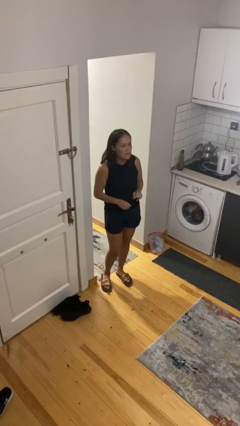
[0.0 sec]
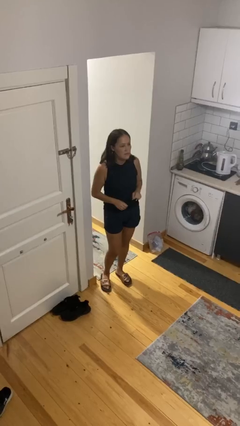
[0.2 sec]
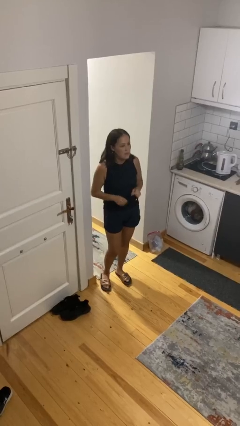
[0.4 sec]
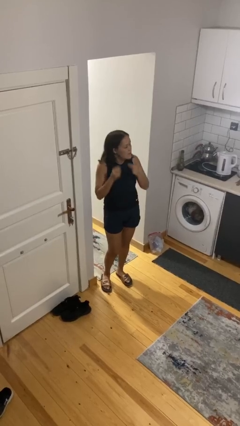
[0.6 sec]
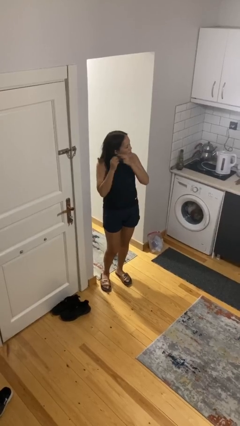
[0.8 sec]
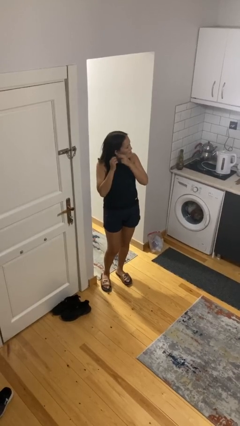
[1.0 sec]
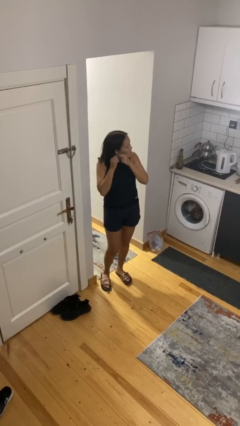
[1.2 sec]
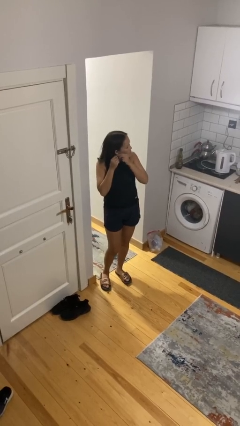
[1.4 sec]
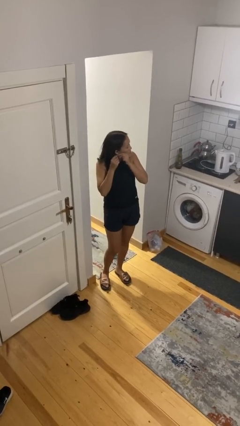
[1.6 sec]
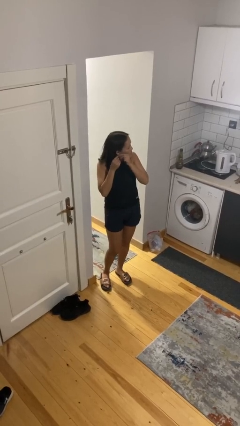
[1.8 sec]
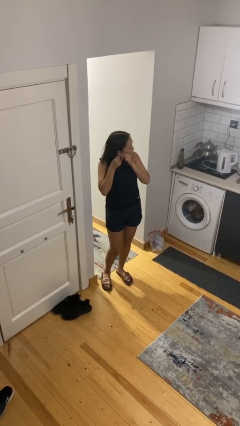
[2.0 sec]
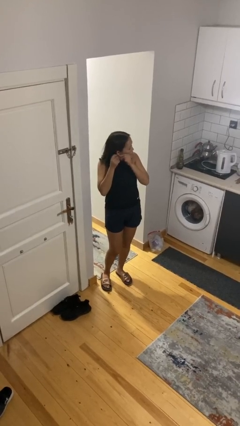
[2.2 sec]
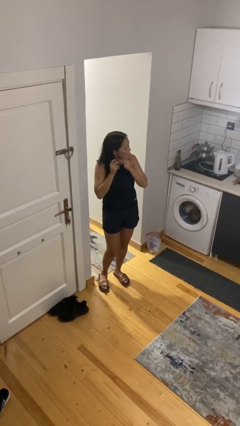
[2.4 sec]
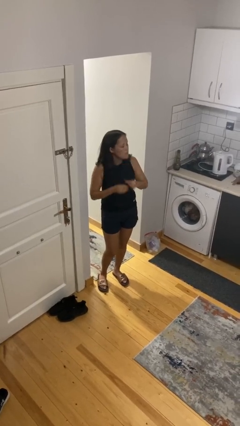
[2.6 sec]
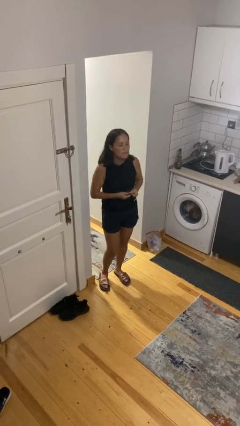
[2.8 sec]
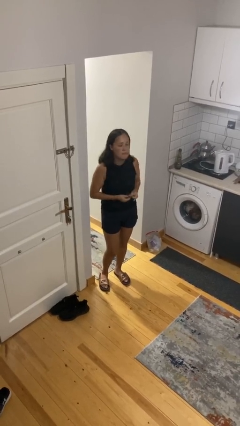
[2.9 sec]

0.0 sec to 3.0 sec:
person takes off earrings

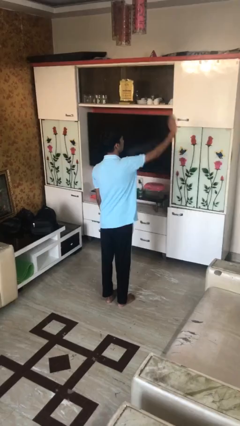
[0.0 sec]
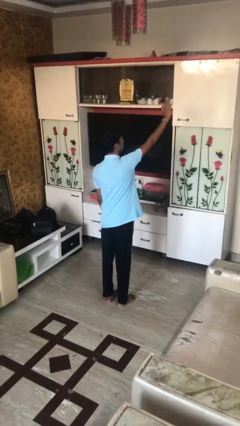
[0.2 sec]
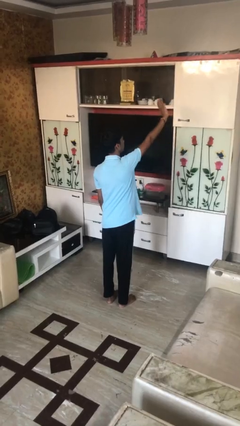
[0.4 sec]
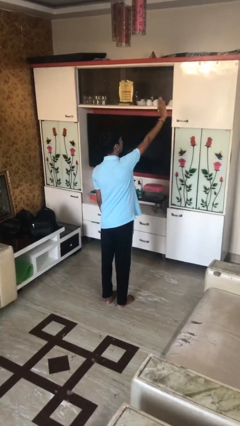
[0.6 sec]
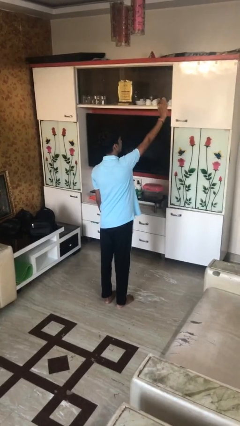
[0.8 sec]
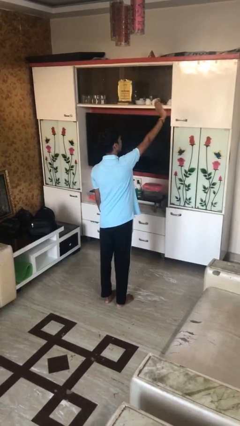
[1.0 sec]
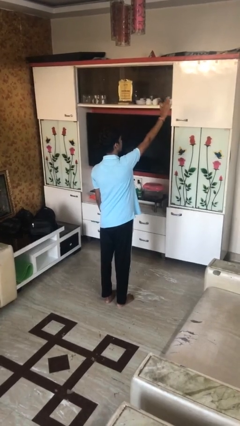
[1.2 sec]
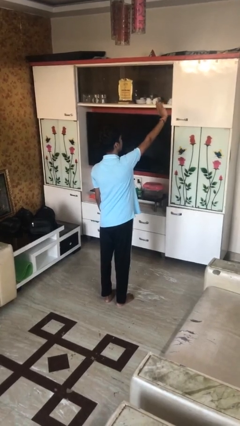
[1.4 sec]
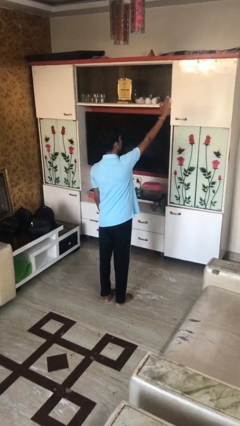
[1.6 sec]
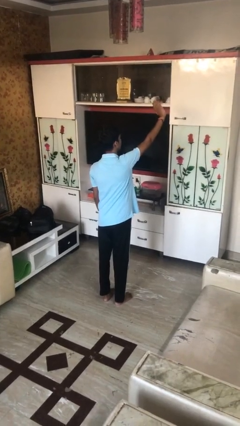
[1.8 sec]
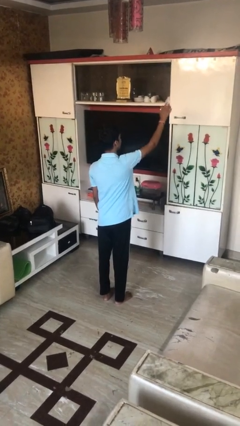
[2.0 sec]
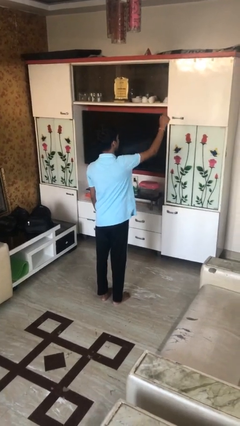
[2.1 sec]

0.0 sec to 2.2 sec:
person waves at person

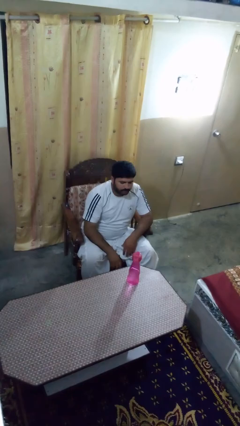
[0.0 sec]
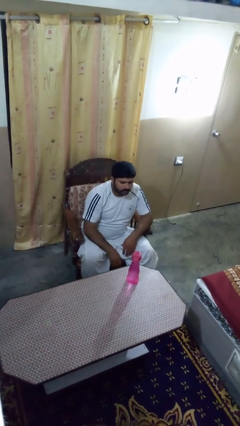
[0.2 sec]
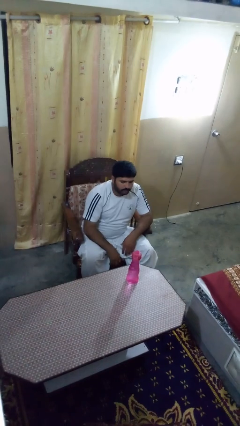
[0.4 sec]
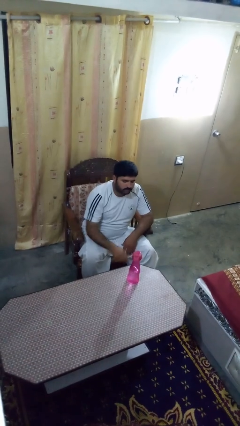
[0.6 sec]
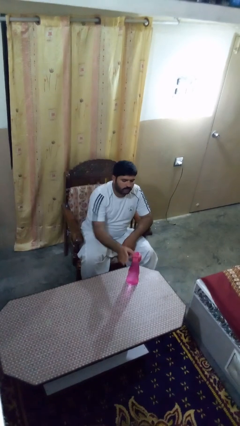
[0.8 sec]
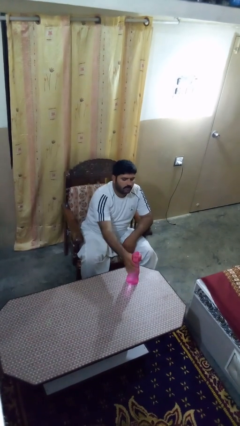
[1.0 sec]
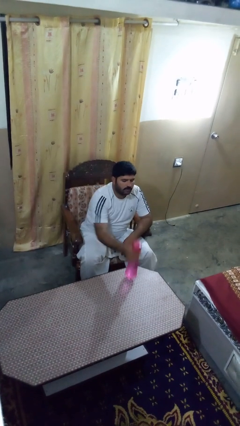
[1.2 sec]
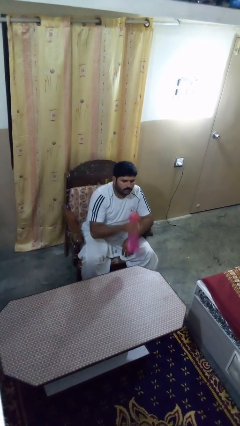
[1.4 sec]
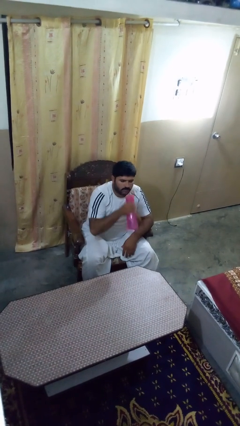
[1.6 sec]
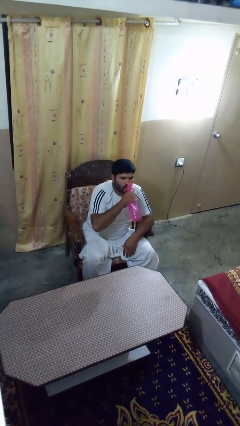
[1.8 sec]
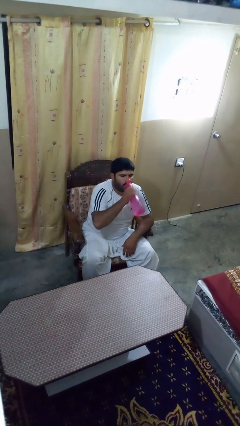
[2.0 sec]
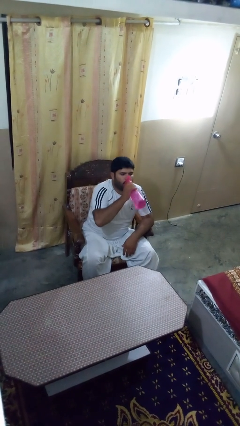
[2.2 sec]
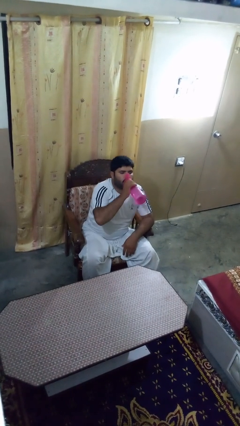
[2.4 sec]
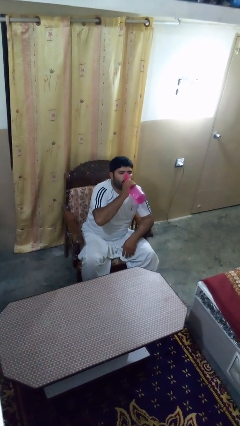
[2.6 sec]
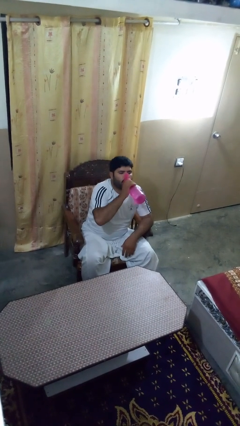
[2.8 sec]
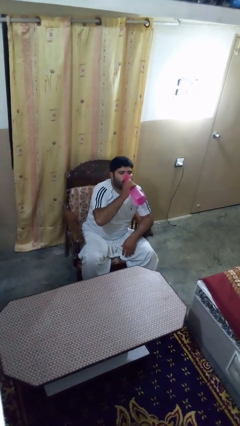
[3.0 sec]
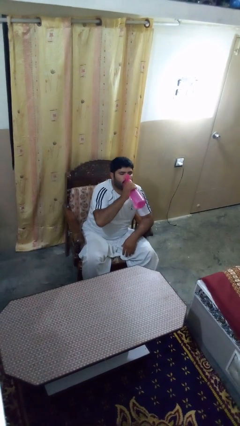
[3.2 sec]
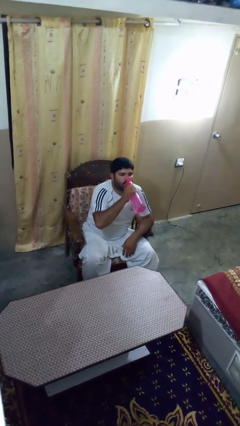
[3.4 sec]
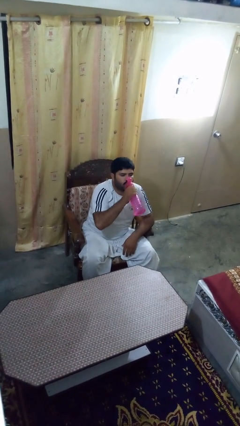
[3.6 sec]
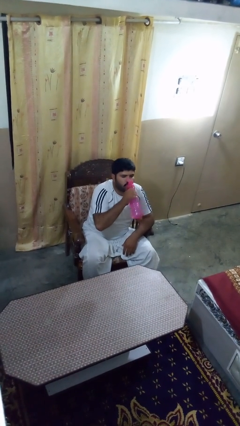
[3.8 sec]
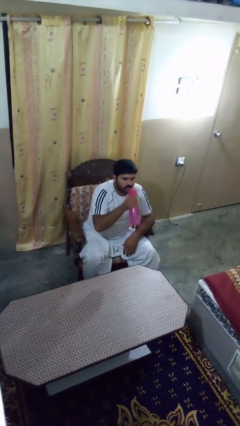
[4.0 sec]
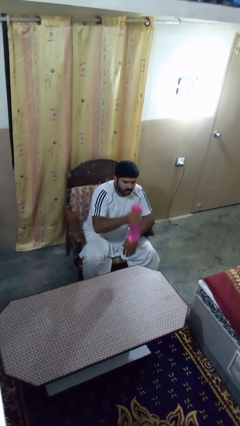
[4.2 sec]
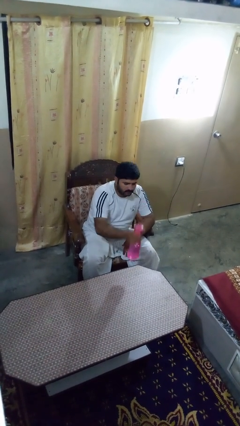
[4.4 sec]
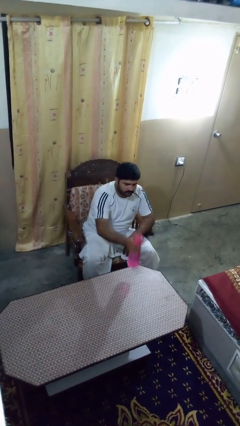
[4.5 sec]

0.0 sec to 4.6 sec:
person drinks from bottle

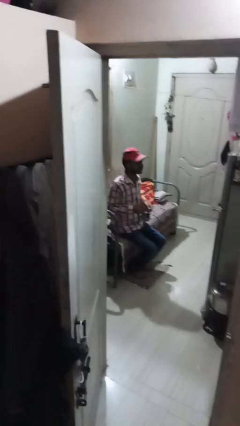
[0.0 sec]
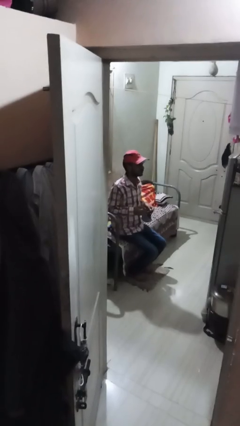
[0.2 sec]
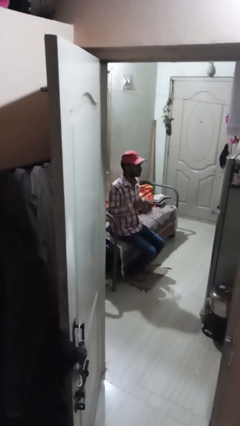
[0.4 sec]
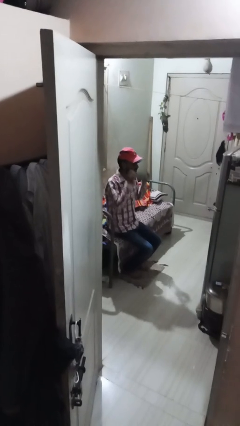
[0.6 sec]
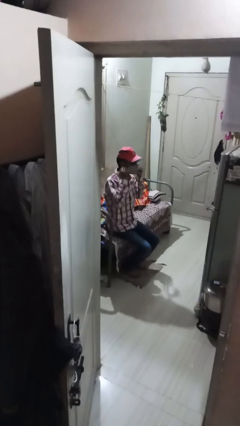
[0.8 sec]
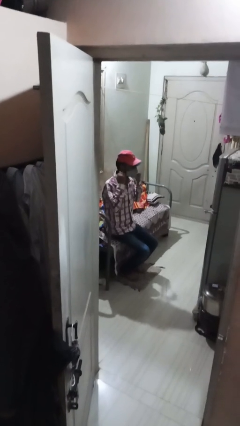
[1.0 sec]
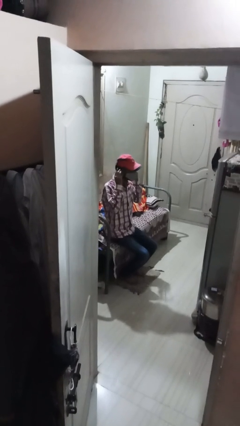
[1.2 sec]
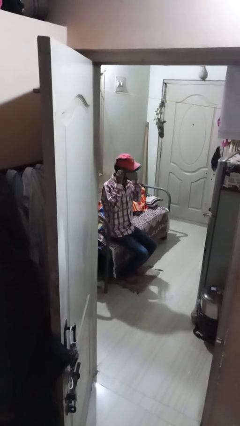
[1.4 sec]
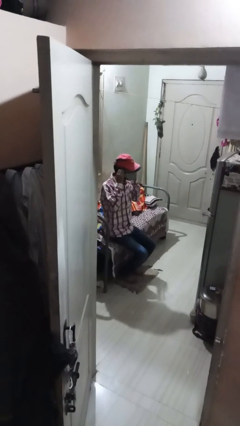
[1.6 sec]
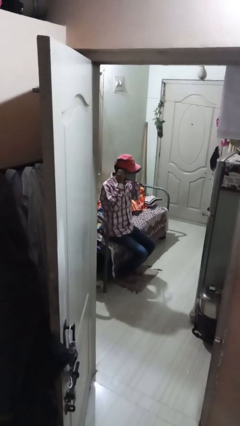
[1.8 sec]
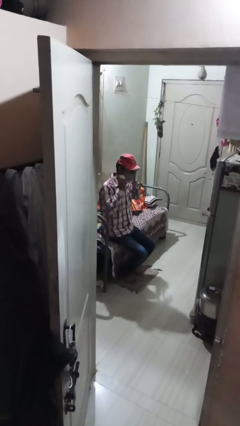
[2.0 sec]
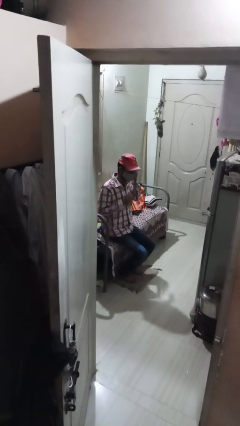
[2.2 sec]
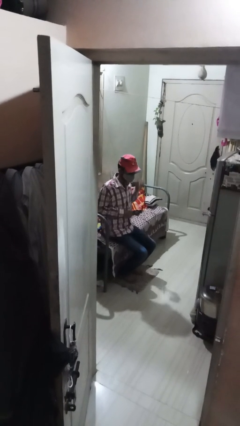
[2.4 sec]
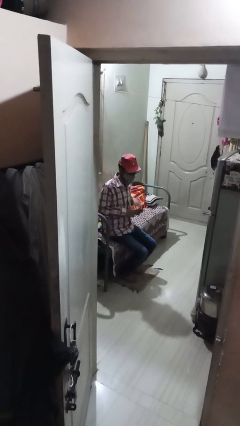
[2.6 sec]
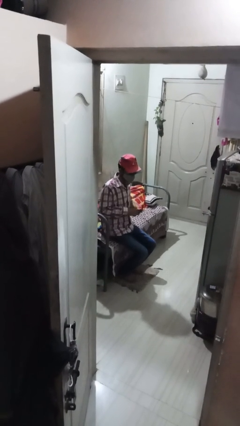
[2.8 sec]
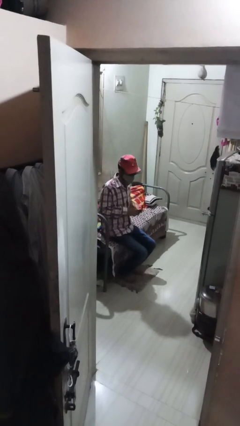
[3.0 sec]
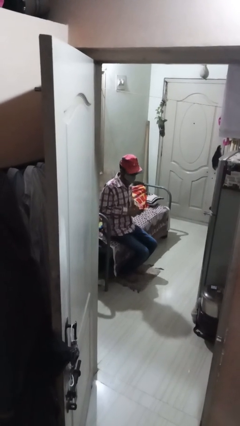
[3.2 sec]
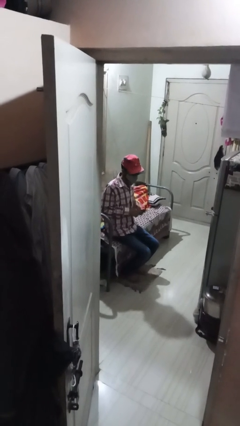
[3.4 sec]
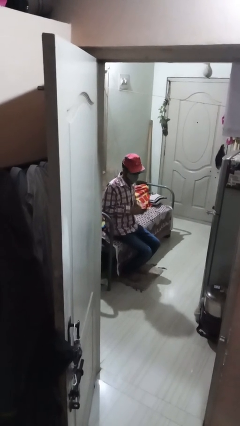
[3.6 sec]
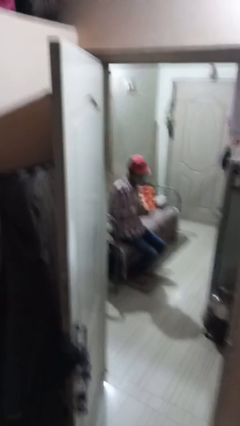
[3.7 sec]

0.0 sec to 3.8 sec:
person puts on facemask

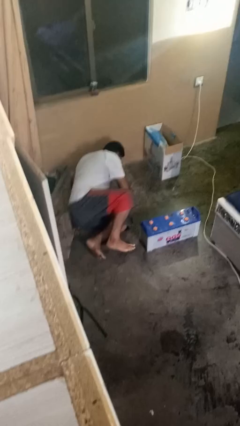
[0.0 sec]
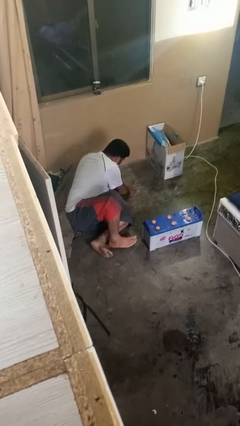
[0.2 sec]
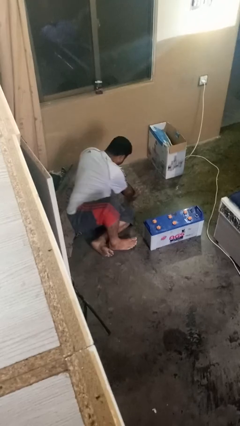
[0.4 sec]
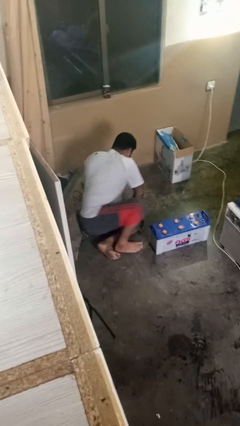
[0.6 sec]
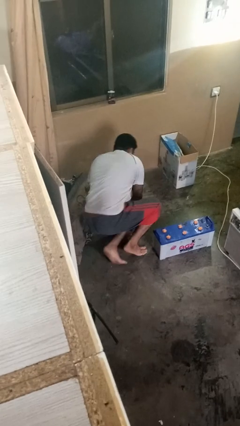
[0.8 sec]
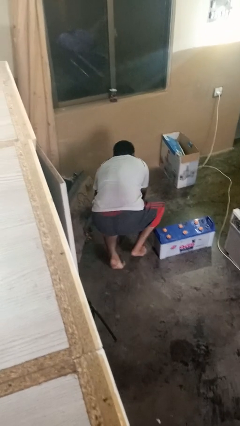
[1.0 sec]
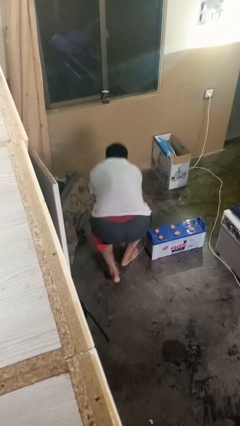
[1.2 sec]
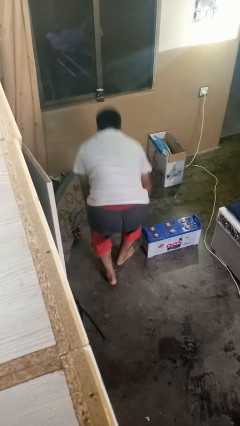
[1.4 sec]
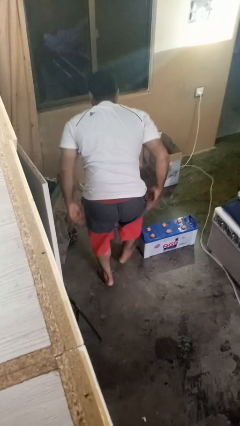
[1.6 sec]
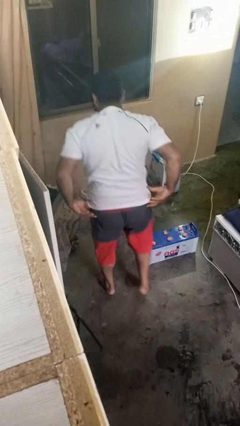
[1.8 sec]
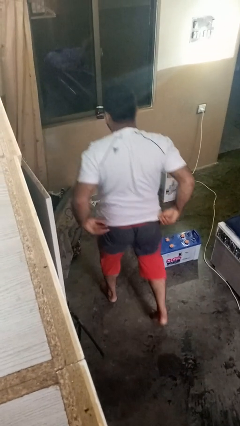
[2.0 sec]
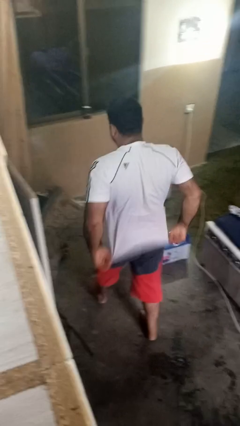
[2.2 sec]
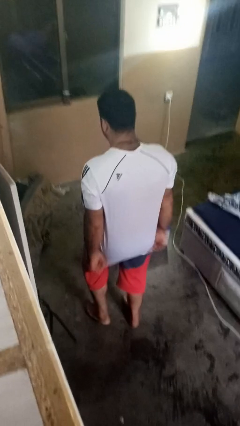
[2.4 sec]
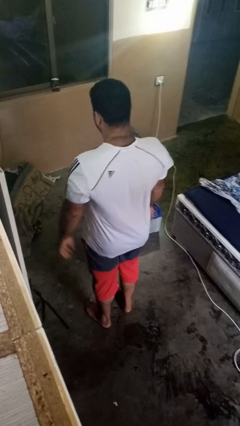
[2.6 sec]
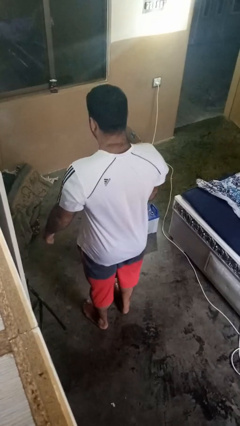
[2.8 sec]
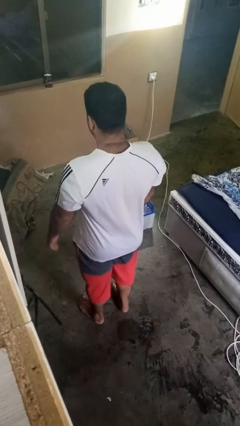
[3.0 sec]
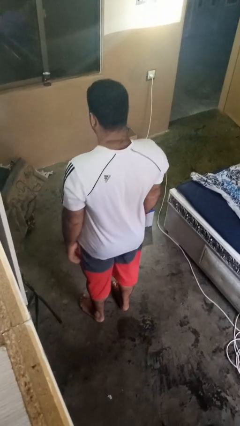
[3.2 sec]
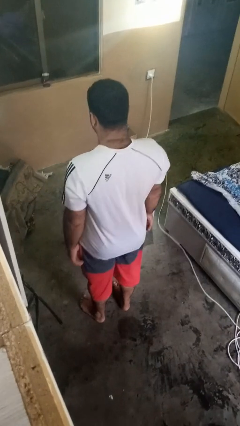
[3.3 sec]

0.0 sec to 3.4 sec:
person stands up from floor

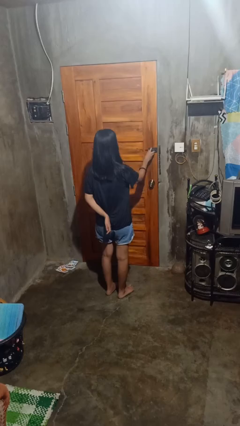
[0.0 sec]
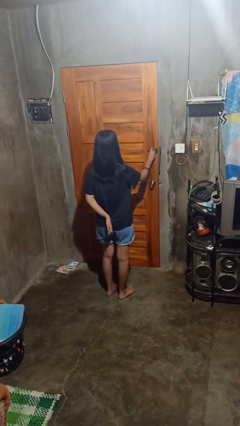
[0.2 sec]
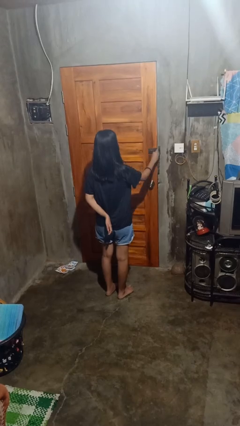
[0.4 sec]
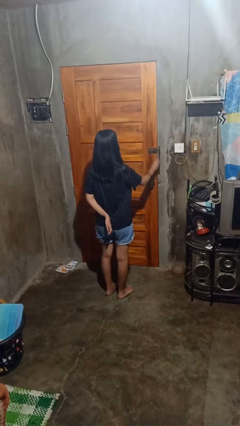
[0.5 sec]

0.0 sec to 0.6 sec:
person locks door with keys
